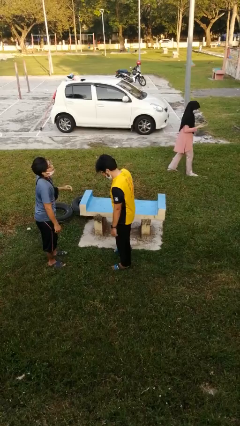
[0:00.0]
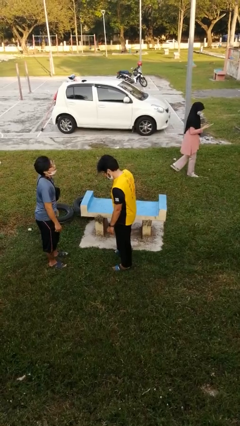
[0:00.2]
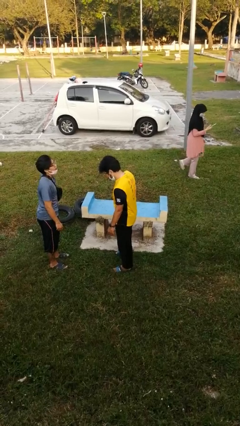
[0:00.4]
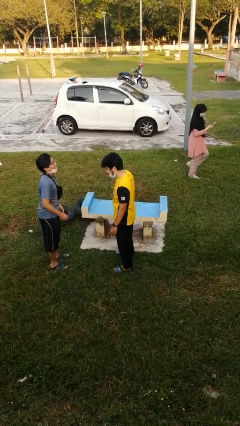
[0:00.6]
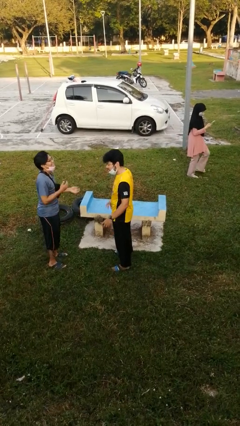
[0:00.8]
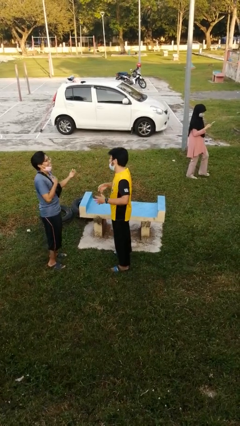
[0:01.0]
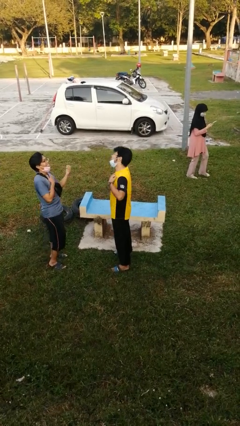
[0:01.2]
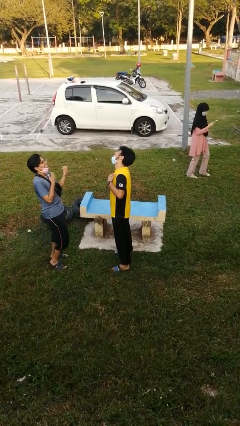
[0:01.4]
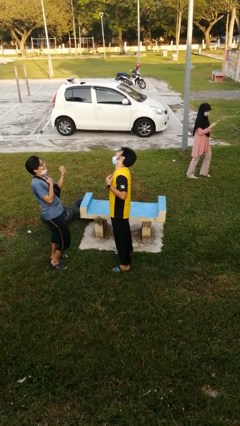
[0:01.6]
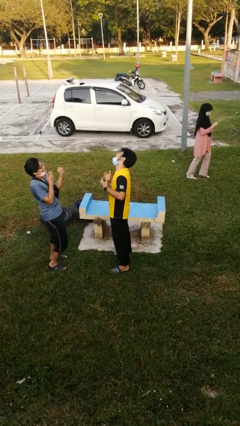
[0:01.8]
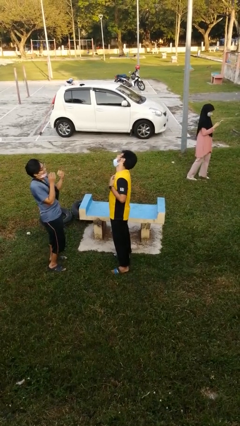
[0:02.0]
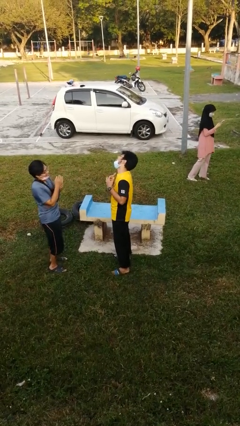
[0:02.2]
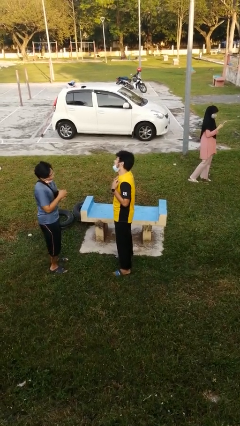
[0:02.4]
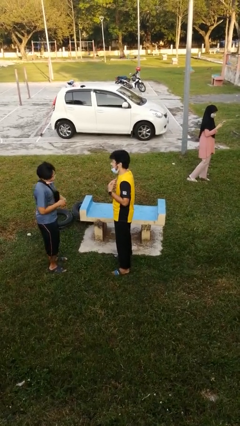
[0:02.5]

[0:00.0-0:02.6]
person laughs with person

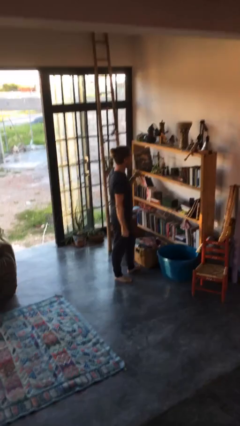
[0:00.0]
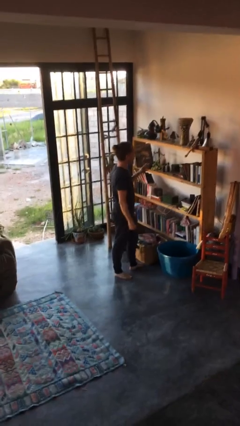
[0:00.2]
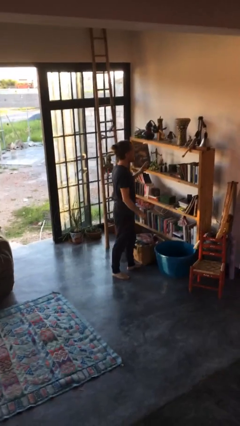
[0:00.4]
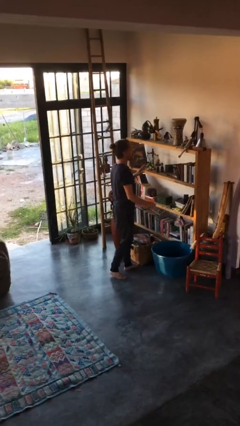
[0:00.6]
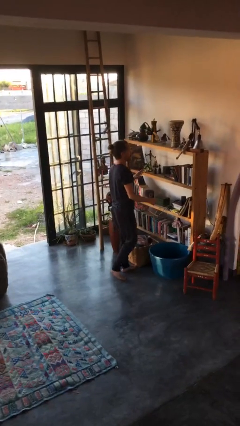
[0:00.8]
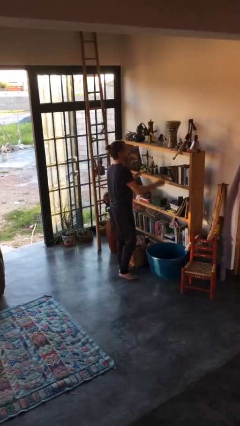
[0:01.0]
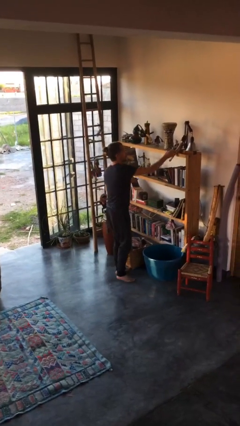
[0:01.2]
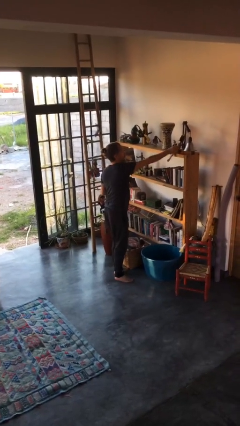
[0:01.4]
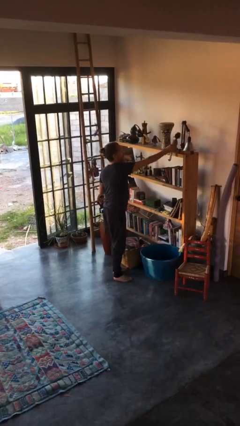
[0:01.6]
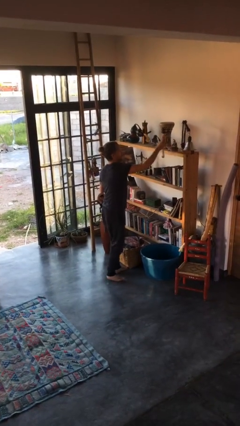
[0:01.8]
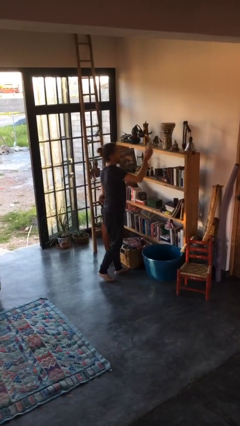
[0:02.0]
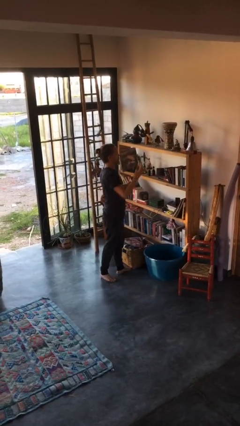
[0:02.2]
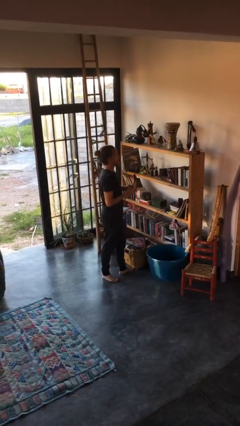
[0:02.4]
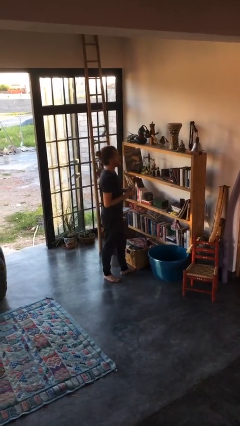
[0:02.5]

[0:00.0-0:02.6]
person picks up object from countertop

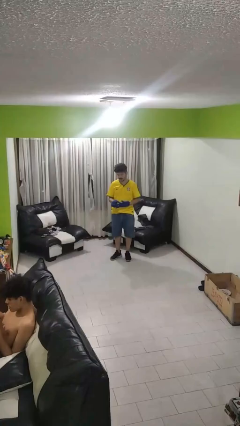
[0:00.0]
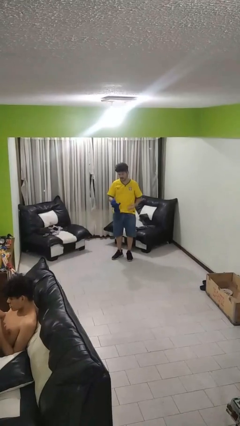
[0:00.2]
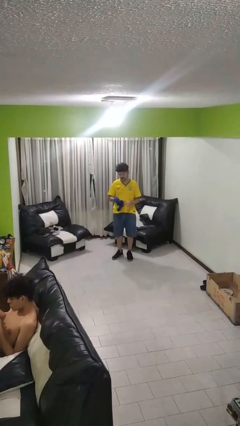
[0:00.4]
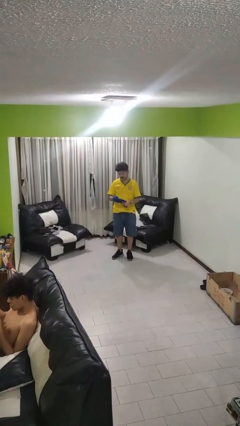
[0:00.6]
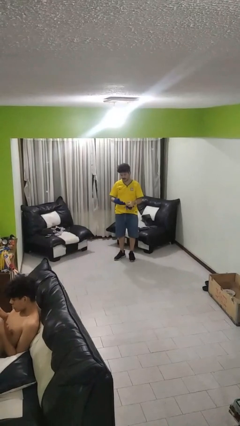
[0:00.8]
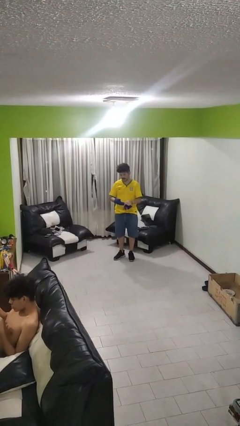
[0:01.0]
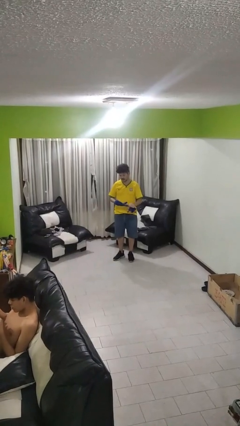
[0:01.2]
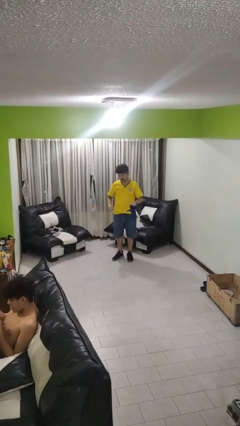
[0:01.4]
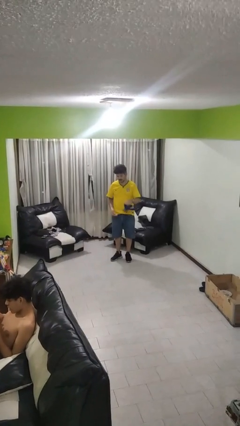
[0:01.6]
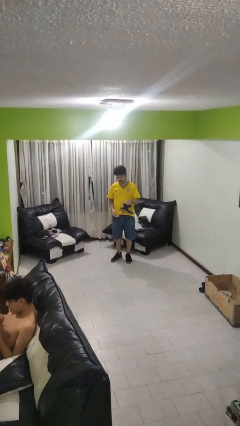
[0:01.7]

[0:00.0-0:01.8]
person takes off gloves

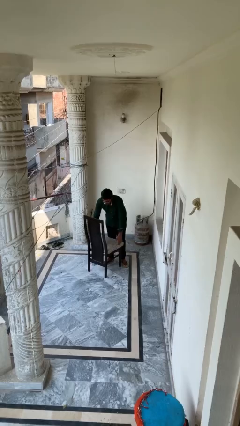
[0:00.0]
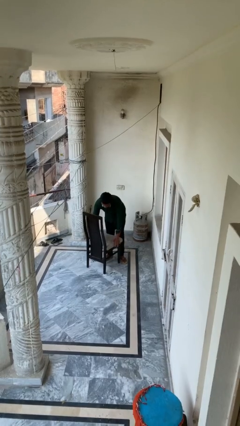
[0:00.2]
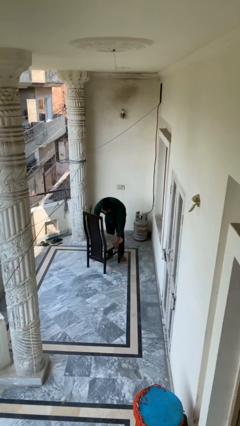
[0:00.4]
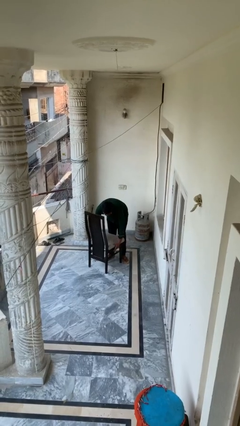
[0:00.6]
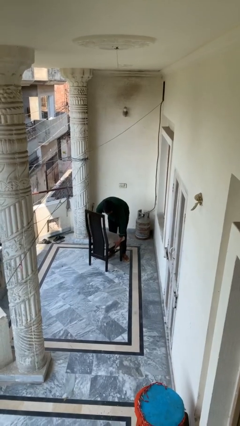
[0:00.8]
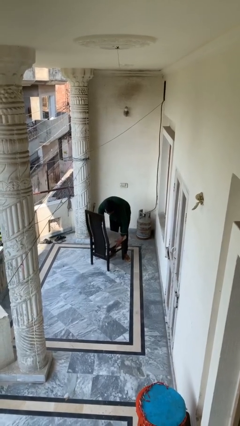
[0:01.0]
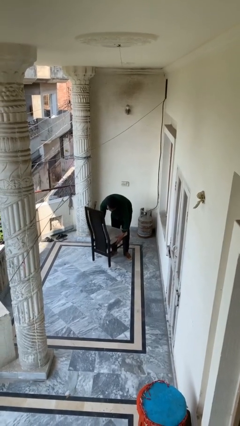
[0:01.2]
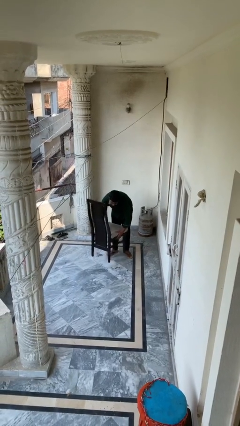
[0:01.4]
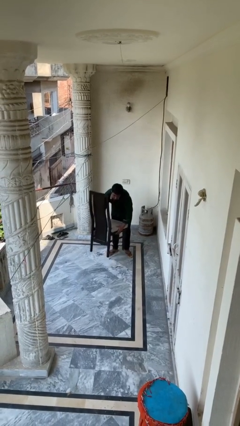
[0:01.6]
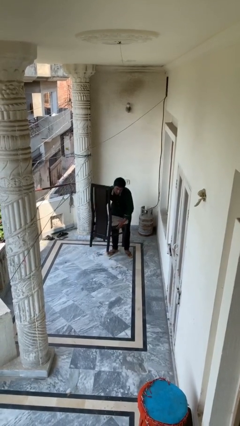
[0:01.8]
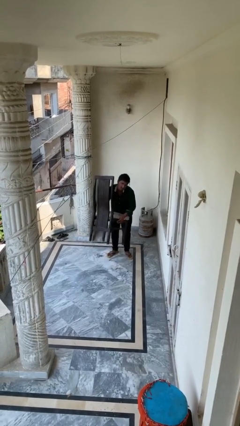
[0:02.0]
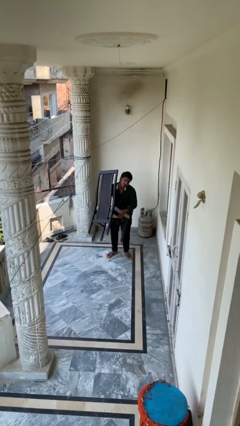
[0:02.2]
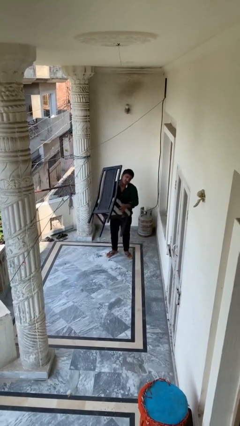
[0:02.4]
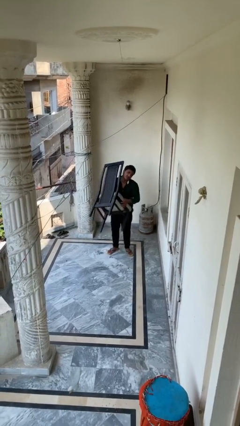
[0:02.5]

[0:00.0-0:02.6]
person picks up object from floor

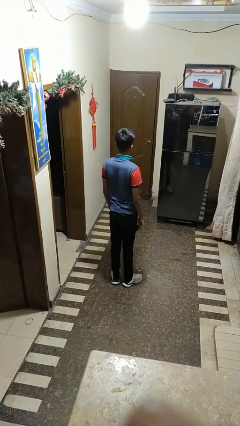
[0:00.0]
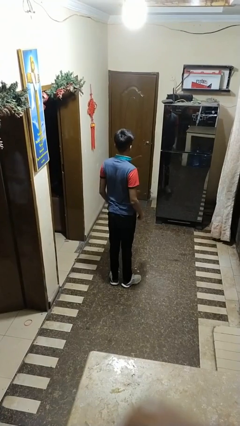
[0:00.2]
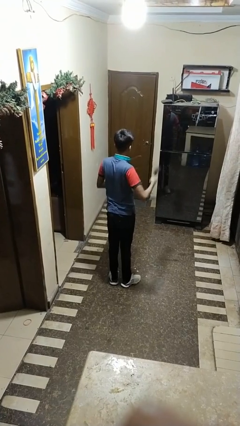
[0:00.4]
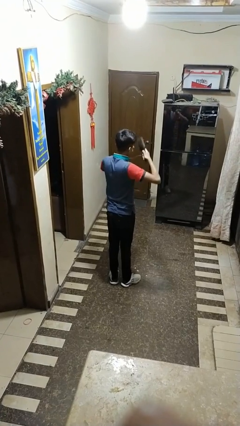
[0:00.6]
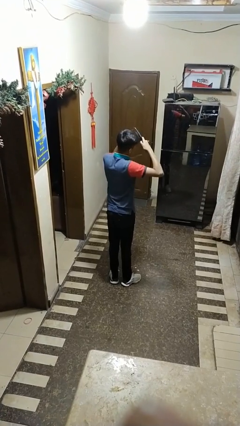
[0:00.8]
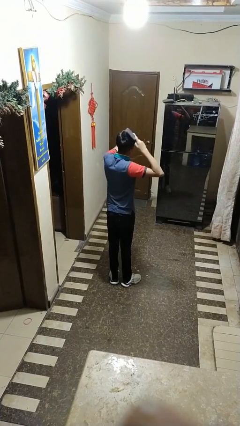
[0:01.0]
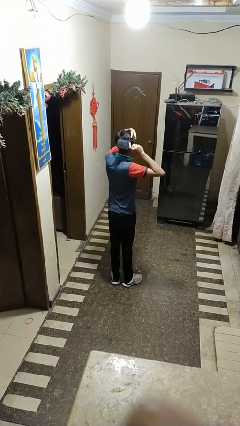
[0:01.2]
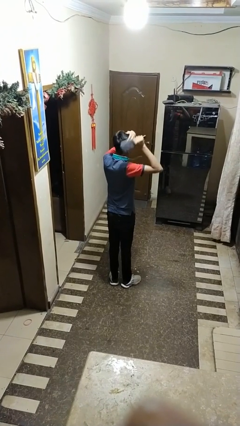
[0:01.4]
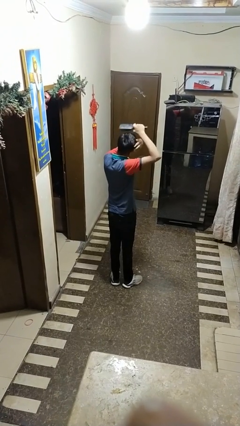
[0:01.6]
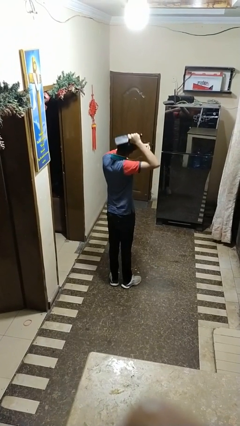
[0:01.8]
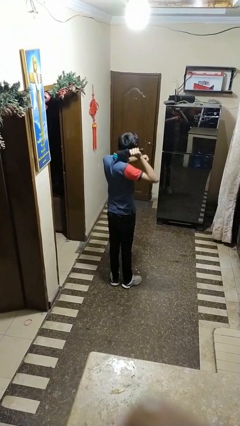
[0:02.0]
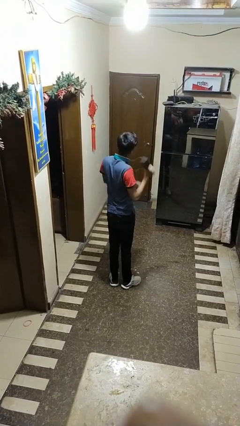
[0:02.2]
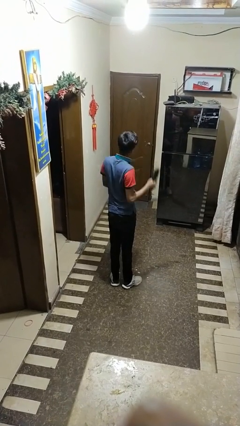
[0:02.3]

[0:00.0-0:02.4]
person brushes hair

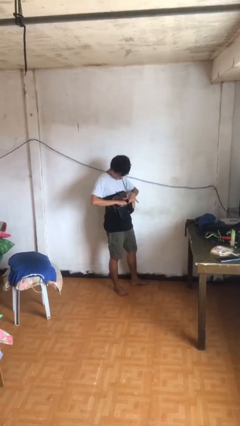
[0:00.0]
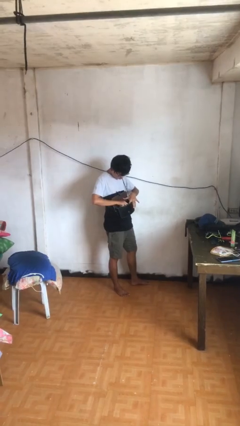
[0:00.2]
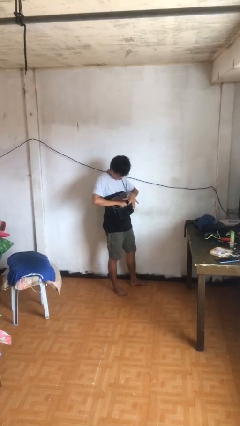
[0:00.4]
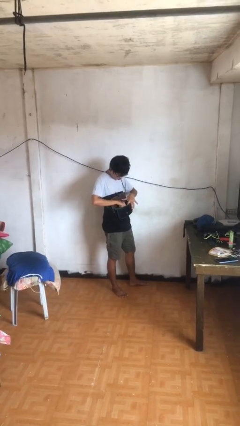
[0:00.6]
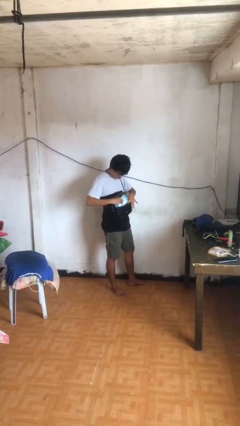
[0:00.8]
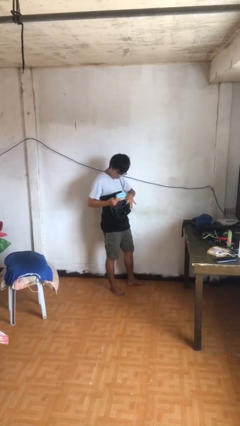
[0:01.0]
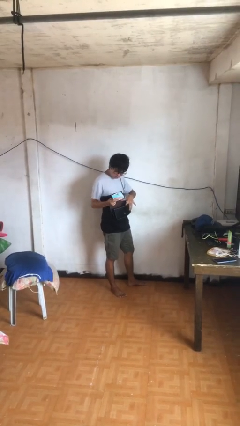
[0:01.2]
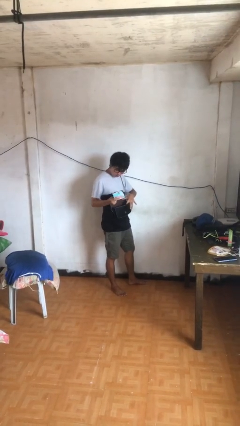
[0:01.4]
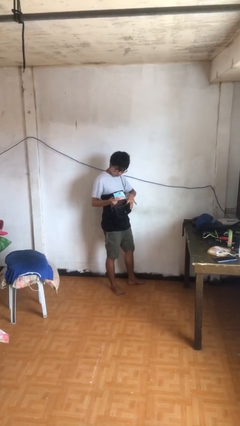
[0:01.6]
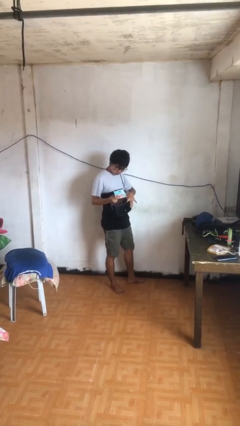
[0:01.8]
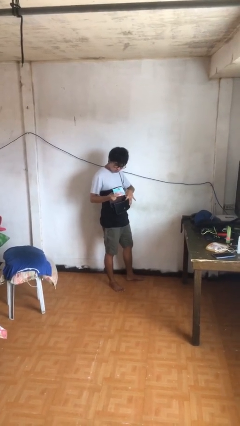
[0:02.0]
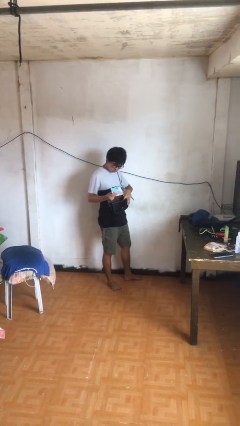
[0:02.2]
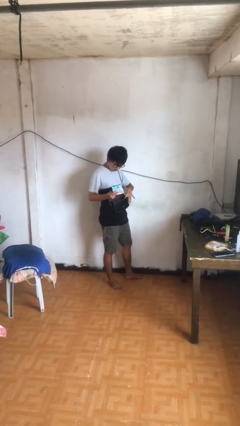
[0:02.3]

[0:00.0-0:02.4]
person takes object from purse

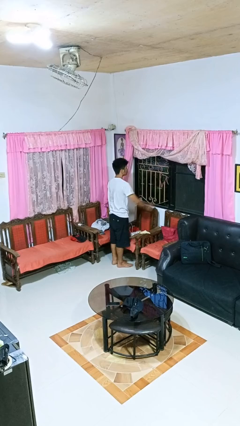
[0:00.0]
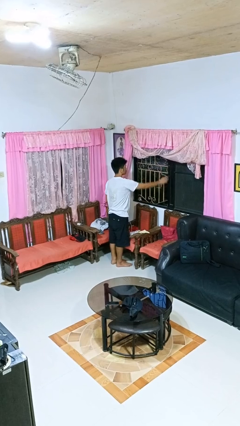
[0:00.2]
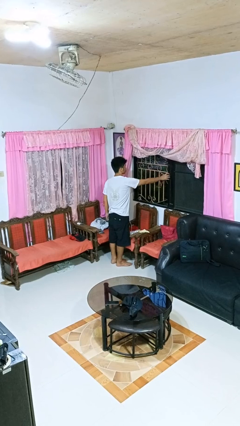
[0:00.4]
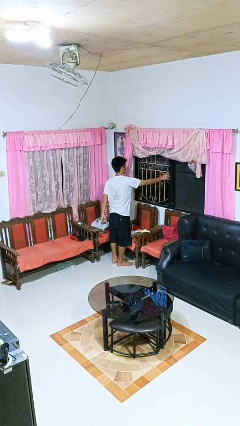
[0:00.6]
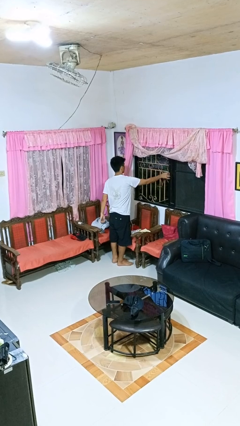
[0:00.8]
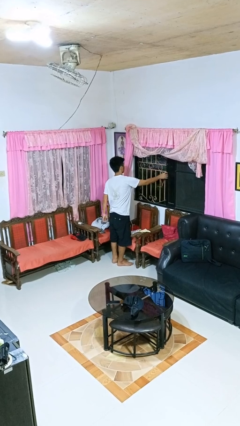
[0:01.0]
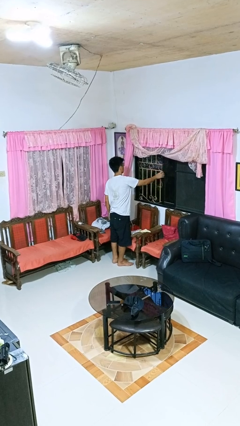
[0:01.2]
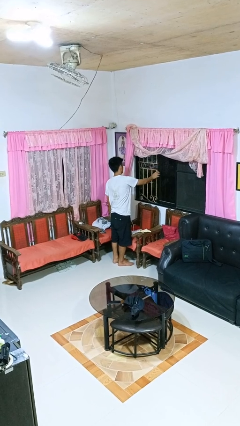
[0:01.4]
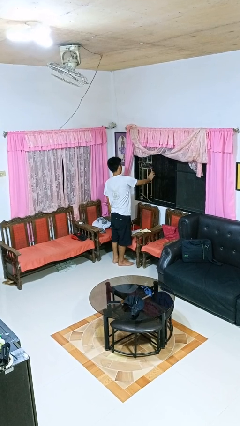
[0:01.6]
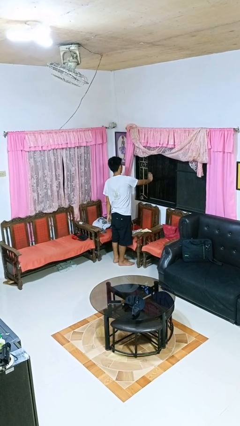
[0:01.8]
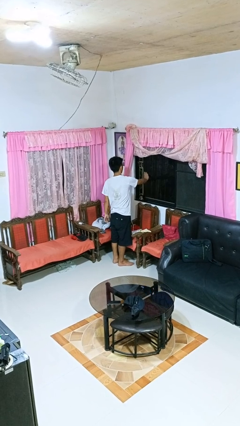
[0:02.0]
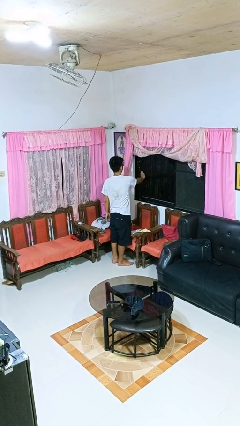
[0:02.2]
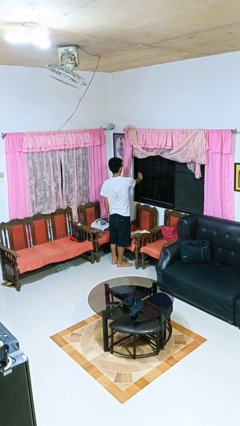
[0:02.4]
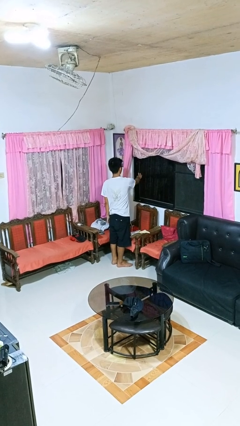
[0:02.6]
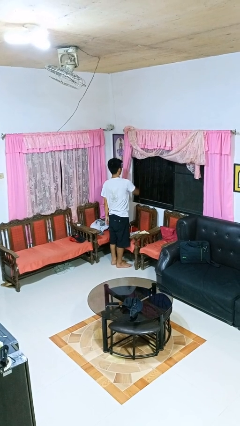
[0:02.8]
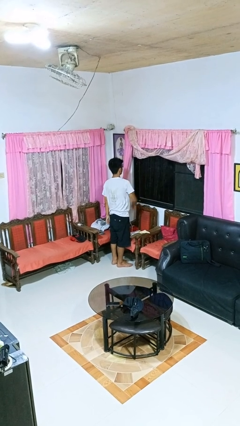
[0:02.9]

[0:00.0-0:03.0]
person closes home window
